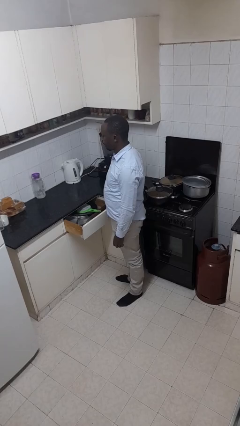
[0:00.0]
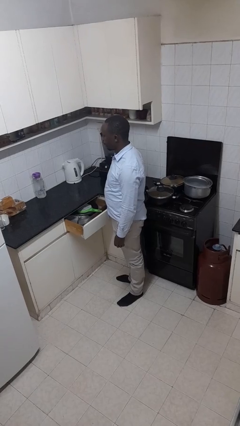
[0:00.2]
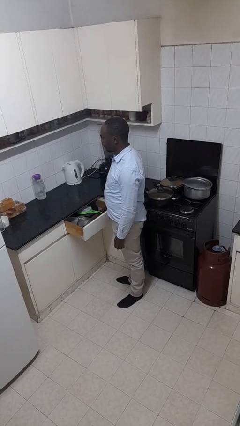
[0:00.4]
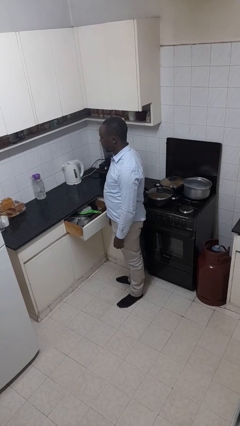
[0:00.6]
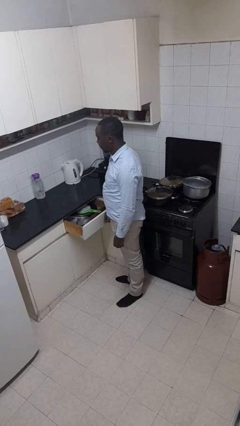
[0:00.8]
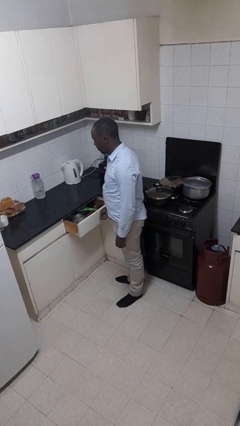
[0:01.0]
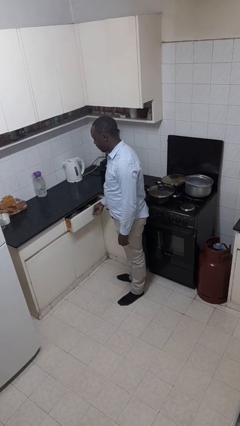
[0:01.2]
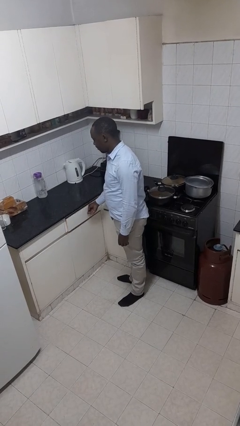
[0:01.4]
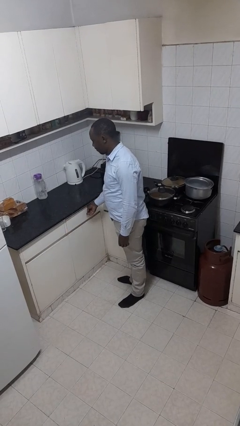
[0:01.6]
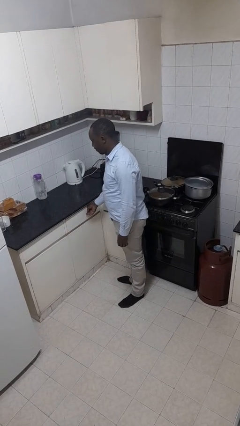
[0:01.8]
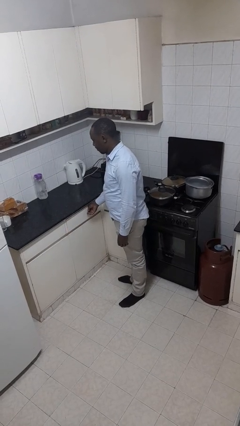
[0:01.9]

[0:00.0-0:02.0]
person closes kitchen drawer

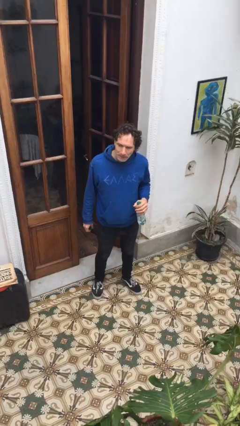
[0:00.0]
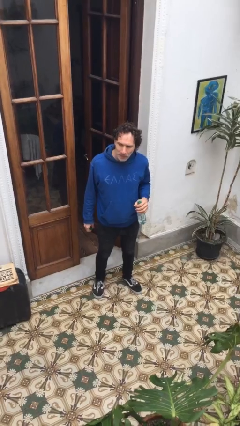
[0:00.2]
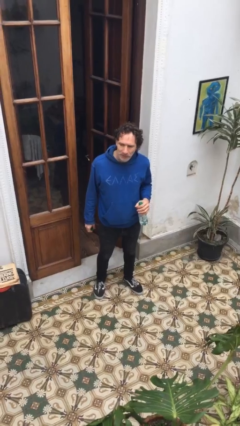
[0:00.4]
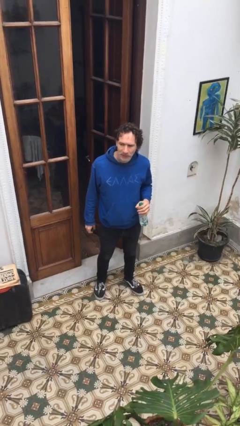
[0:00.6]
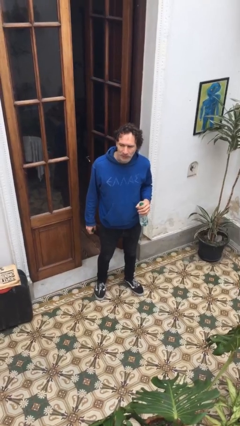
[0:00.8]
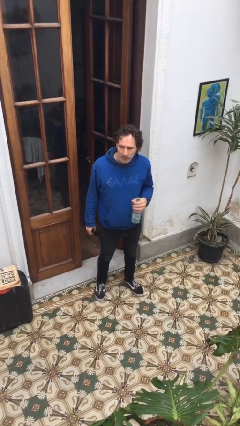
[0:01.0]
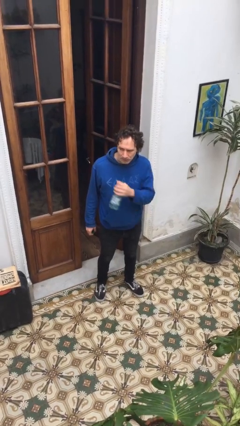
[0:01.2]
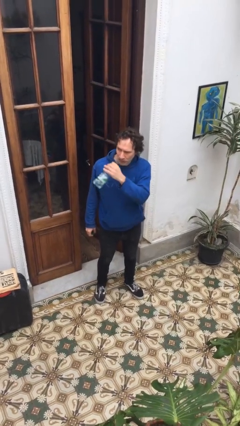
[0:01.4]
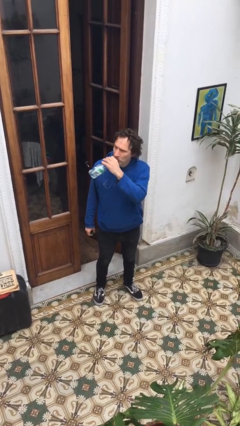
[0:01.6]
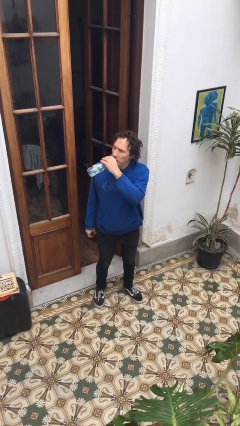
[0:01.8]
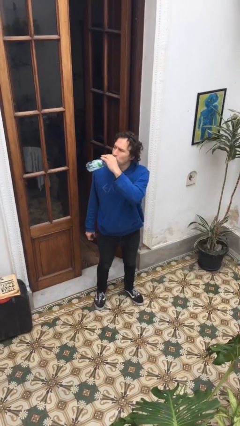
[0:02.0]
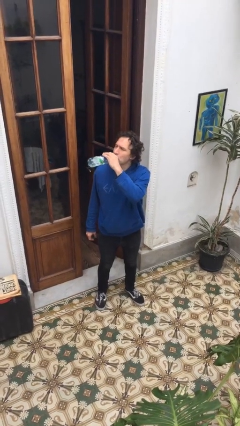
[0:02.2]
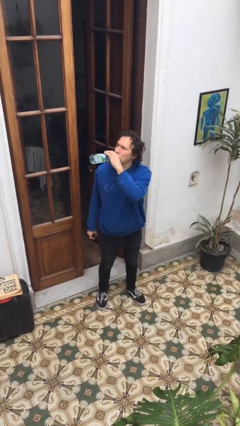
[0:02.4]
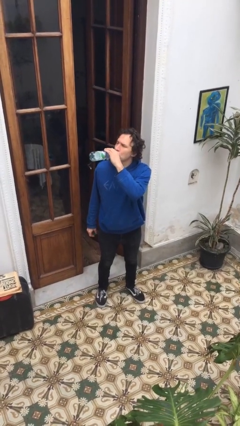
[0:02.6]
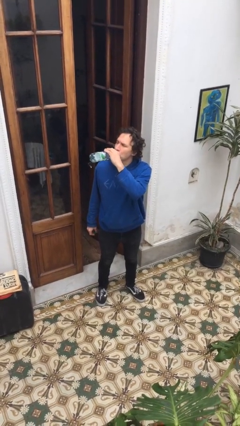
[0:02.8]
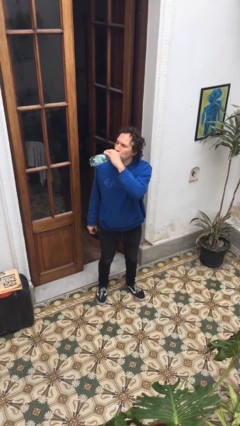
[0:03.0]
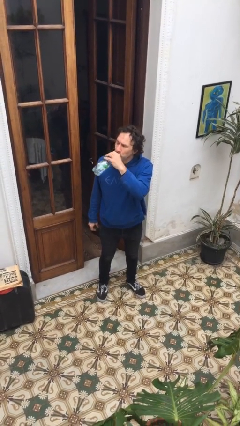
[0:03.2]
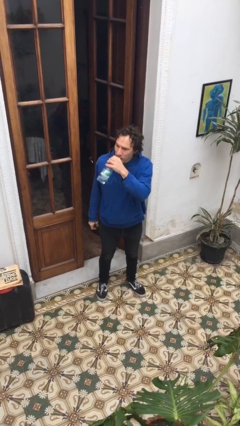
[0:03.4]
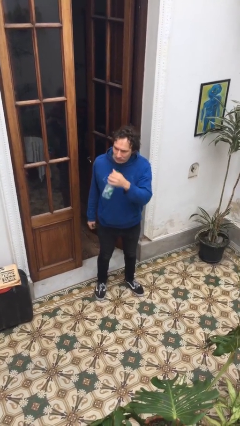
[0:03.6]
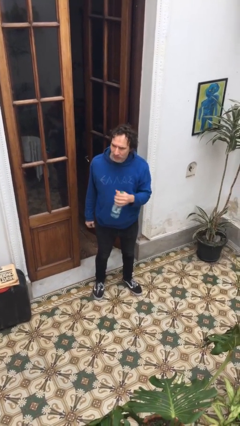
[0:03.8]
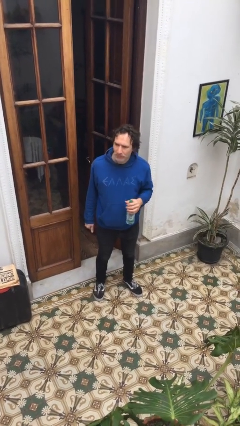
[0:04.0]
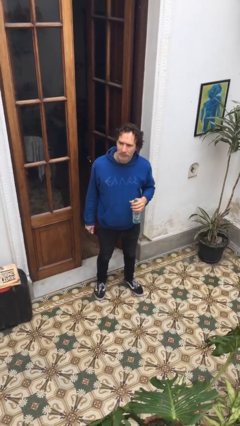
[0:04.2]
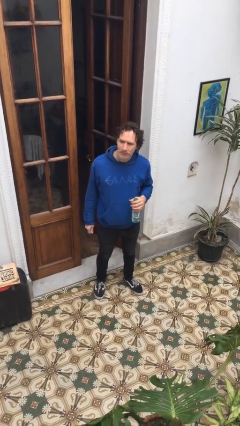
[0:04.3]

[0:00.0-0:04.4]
person drinks from bottle

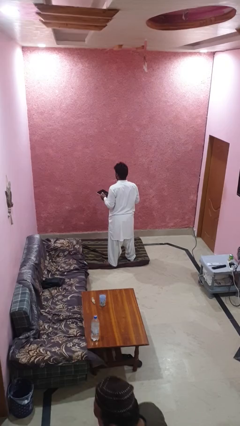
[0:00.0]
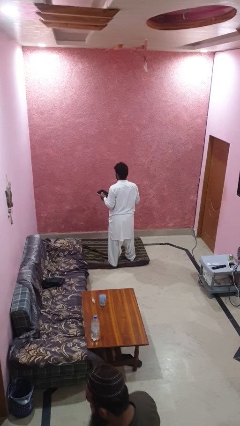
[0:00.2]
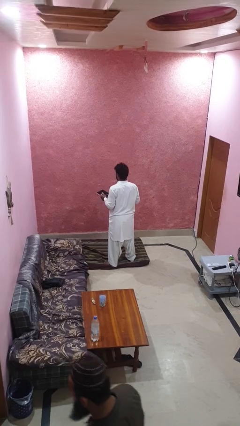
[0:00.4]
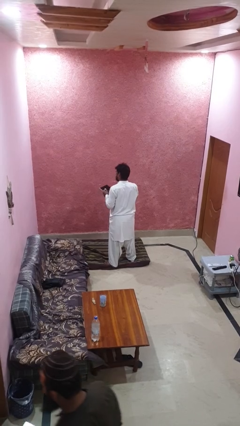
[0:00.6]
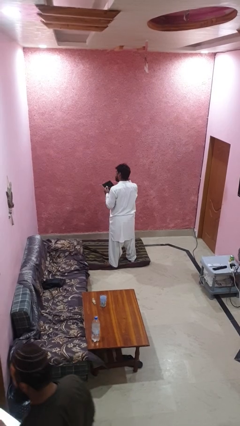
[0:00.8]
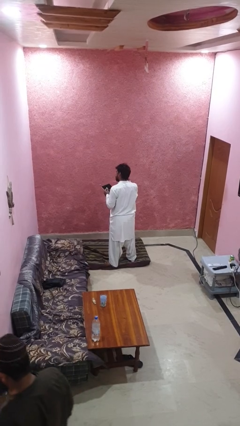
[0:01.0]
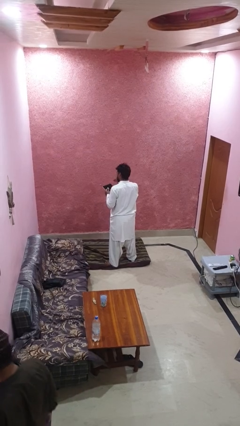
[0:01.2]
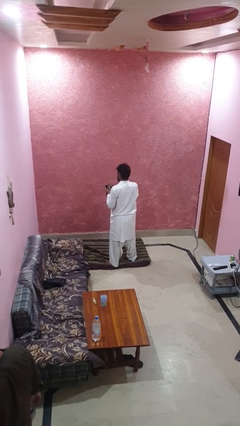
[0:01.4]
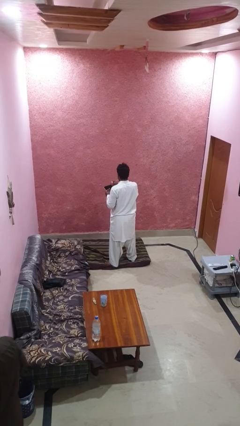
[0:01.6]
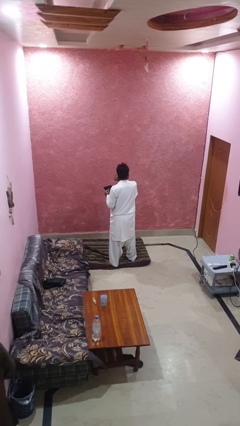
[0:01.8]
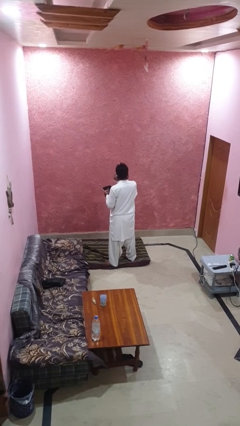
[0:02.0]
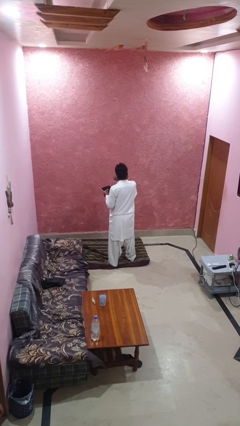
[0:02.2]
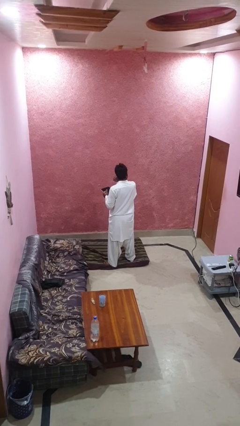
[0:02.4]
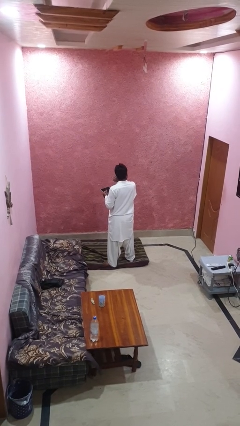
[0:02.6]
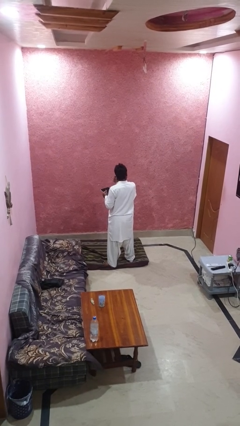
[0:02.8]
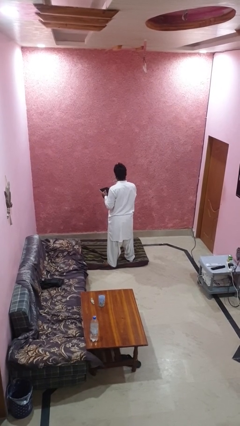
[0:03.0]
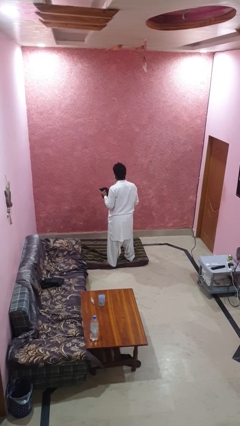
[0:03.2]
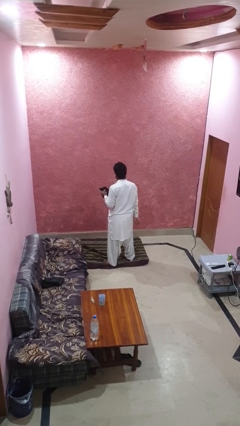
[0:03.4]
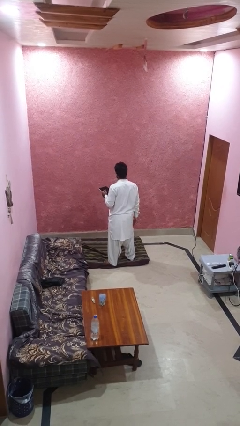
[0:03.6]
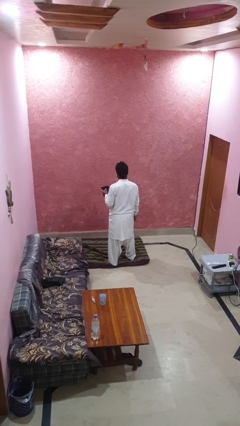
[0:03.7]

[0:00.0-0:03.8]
person puts on headphones

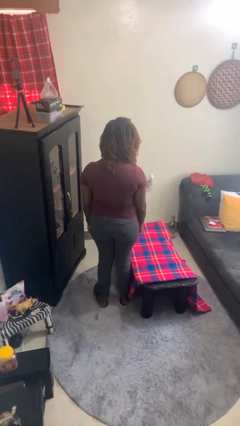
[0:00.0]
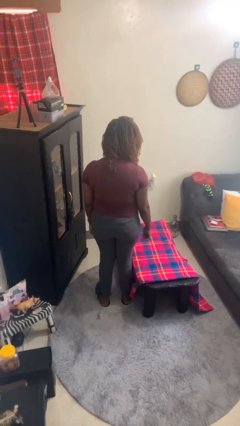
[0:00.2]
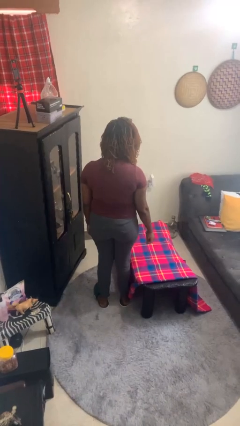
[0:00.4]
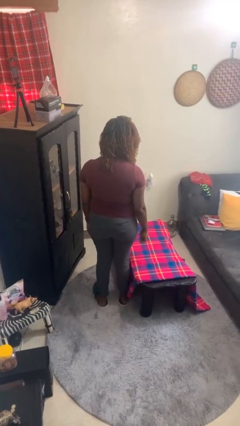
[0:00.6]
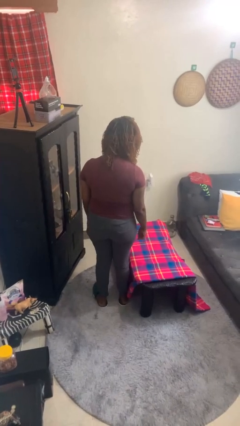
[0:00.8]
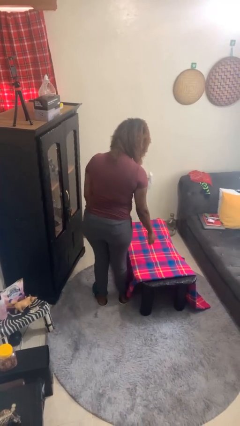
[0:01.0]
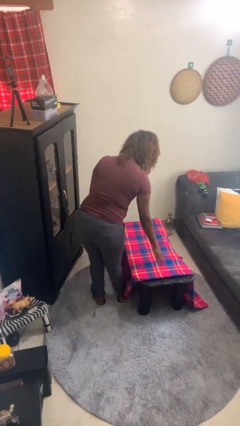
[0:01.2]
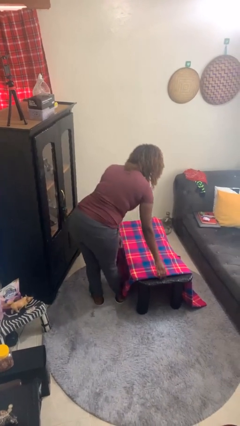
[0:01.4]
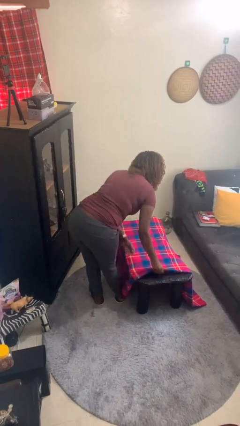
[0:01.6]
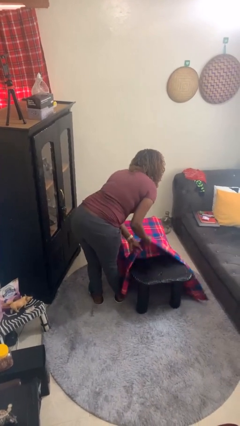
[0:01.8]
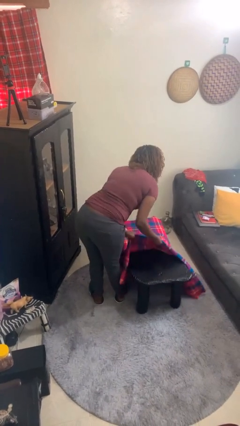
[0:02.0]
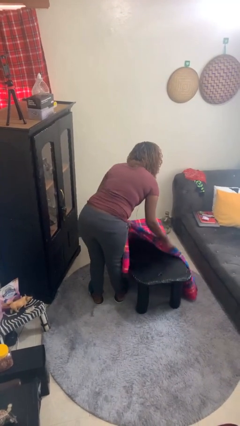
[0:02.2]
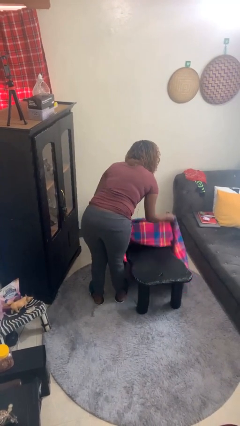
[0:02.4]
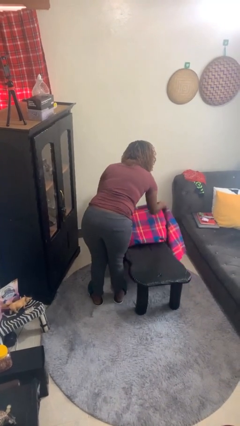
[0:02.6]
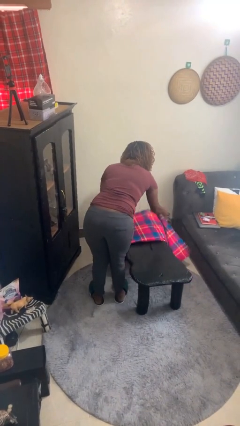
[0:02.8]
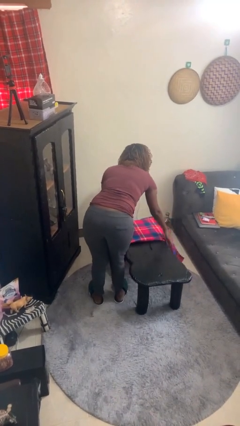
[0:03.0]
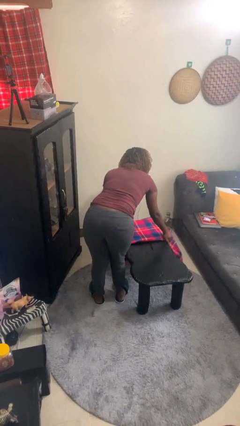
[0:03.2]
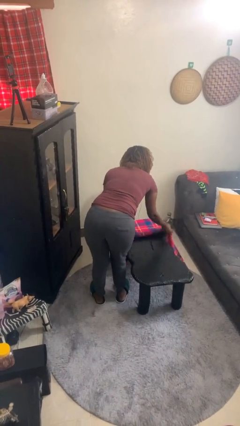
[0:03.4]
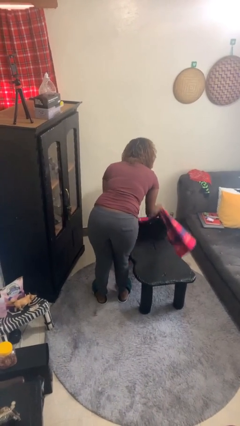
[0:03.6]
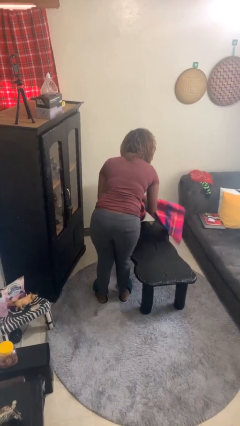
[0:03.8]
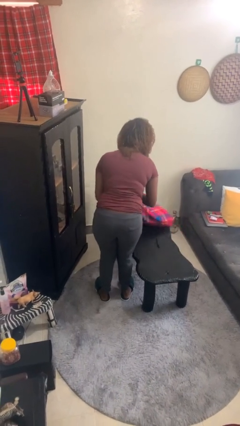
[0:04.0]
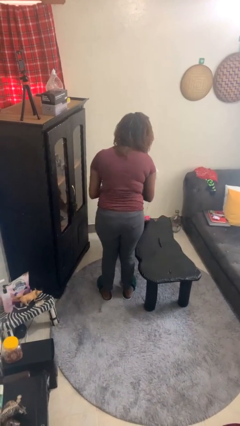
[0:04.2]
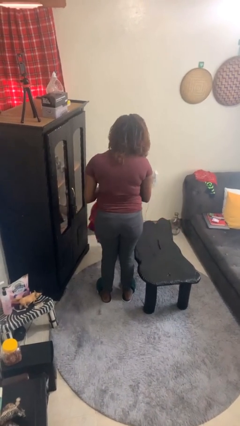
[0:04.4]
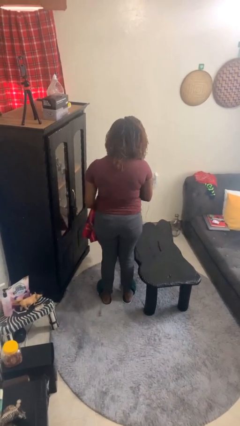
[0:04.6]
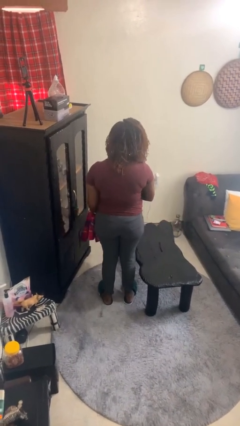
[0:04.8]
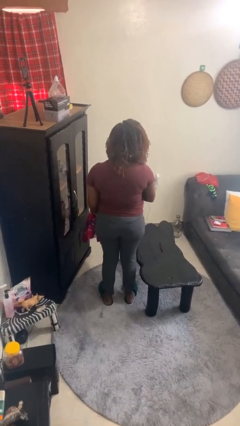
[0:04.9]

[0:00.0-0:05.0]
person folds tablecloth

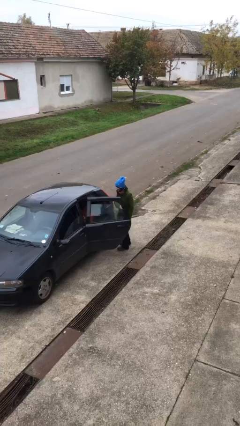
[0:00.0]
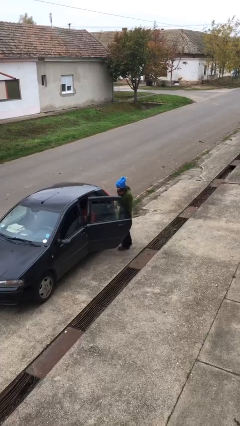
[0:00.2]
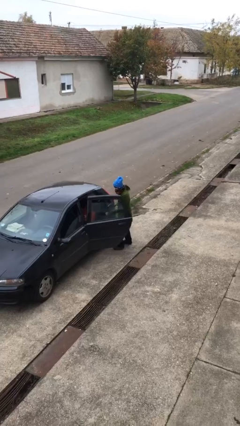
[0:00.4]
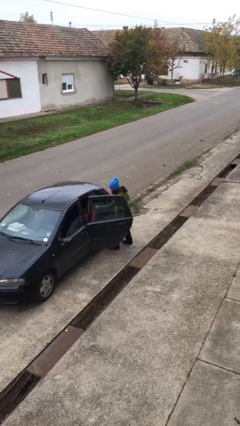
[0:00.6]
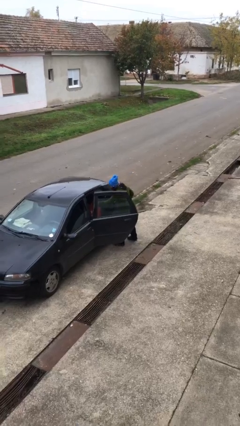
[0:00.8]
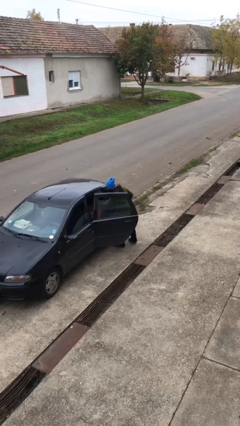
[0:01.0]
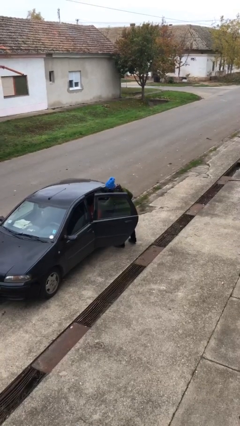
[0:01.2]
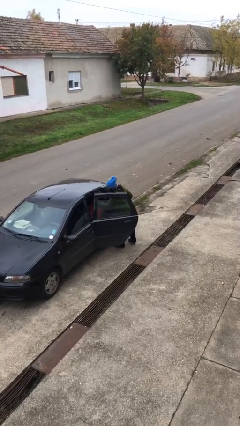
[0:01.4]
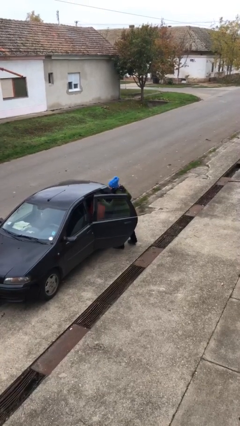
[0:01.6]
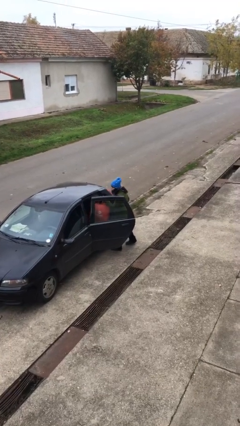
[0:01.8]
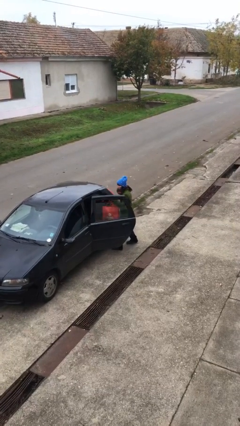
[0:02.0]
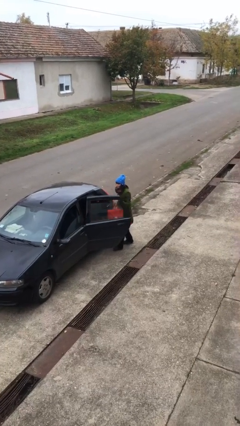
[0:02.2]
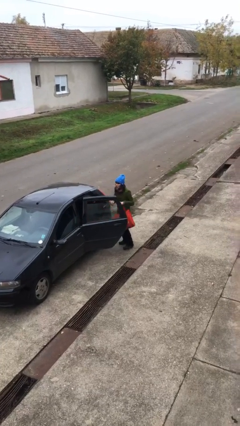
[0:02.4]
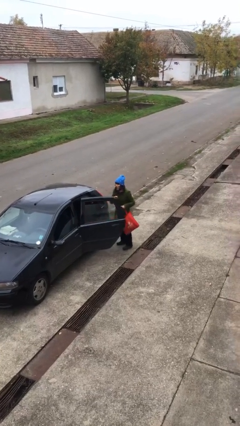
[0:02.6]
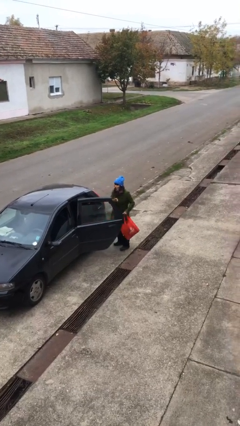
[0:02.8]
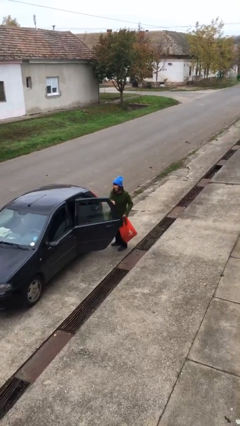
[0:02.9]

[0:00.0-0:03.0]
person unloads car
